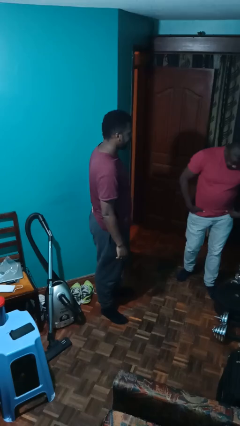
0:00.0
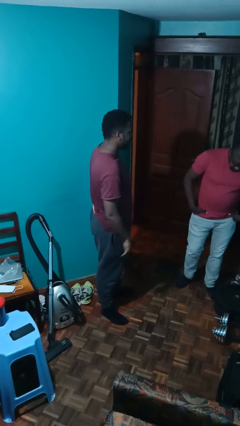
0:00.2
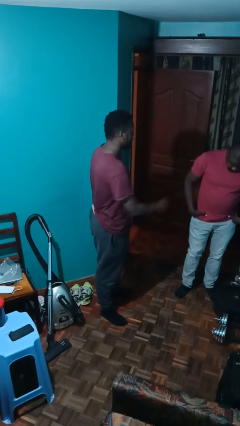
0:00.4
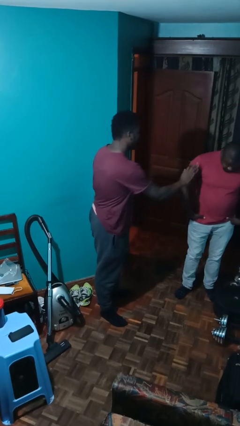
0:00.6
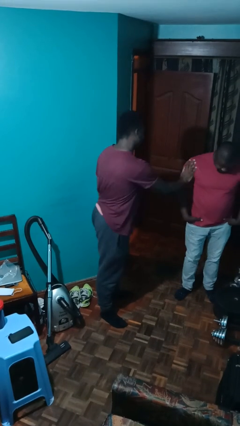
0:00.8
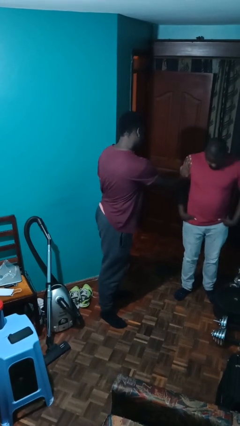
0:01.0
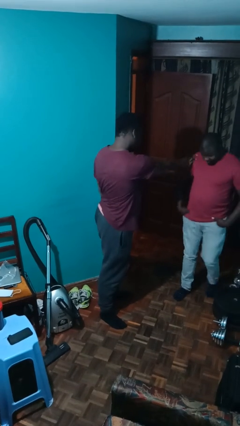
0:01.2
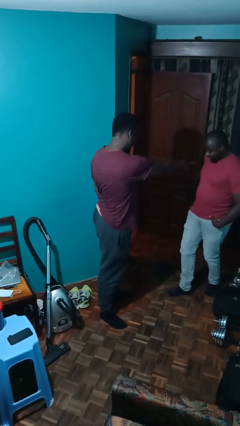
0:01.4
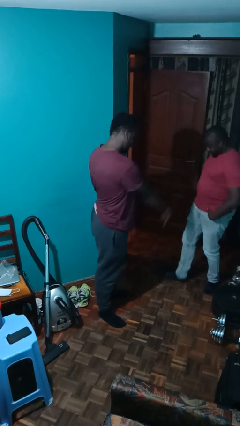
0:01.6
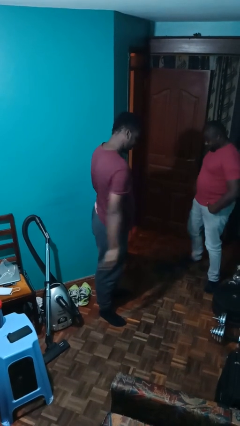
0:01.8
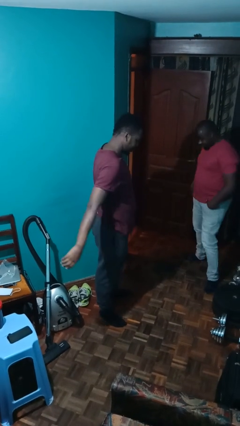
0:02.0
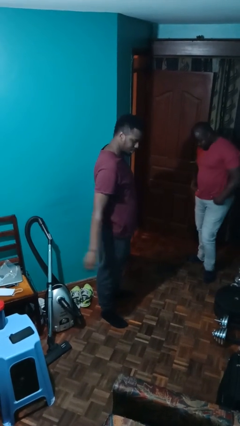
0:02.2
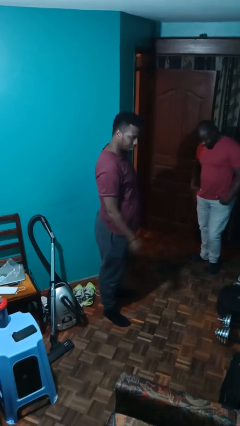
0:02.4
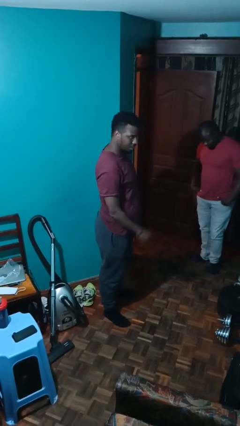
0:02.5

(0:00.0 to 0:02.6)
person shoves person

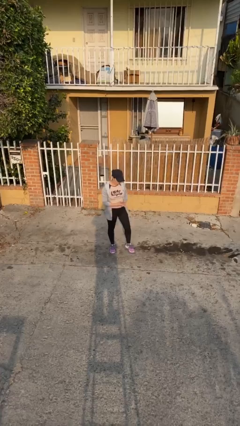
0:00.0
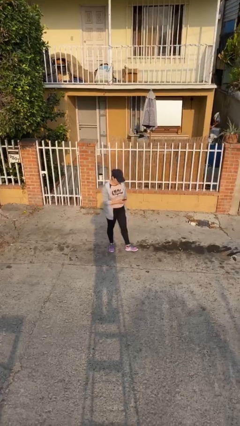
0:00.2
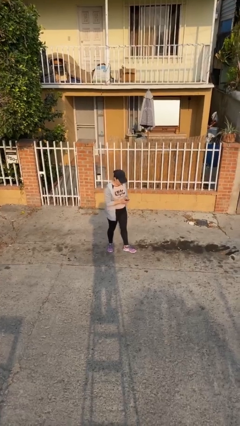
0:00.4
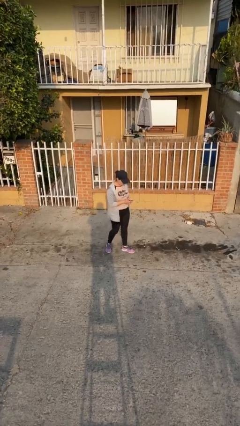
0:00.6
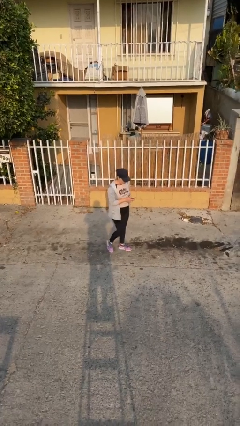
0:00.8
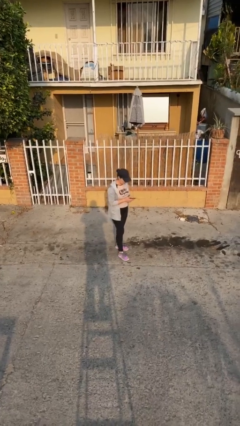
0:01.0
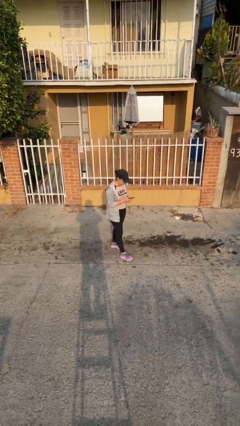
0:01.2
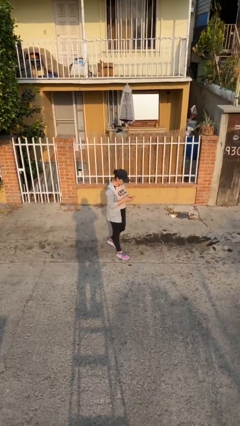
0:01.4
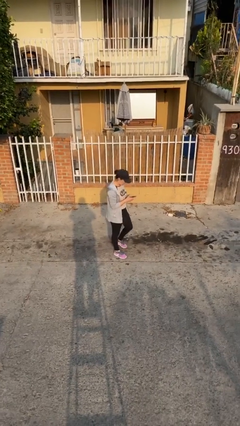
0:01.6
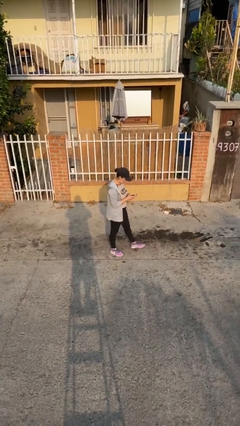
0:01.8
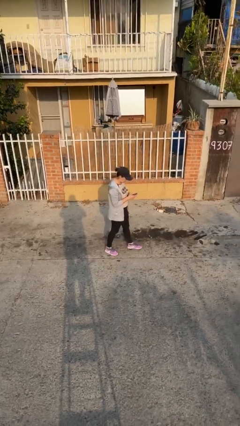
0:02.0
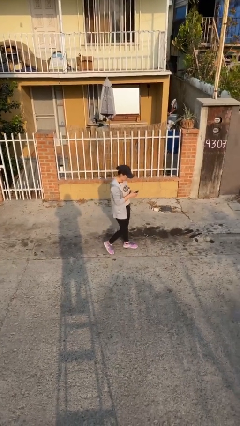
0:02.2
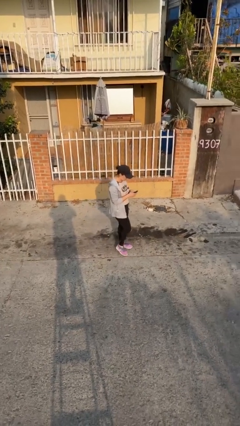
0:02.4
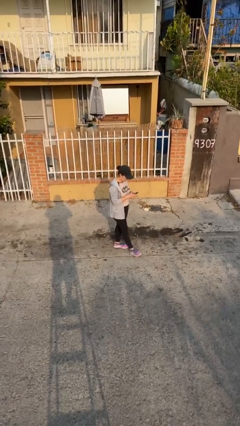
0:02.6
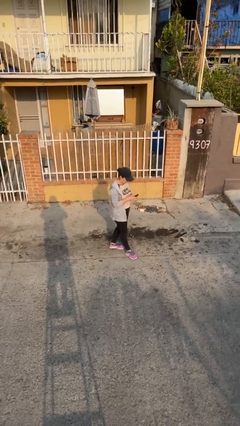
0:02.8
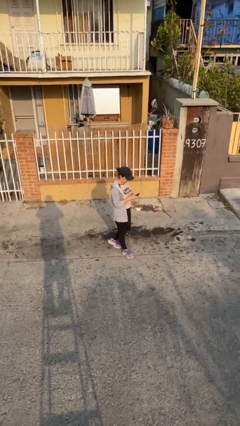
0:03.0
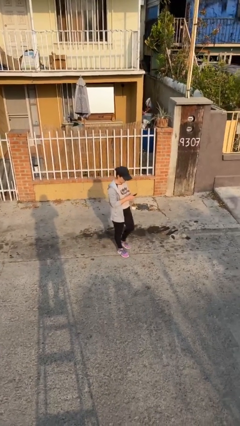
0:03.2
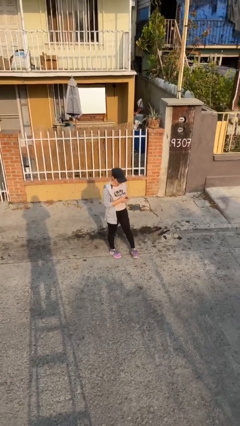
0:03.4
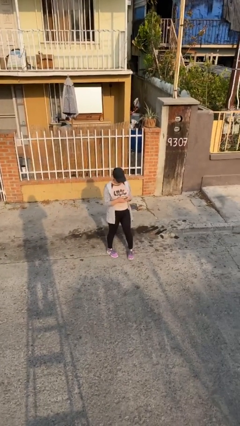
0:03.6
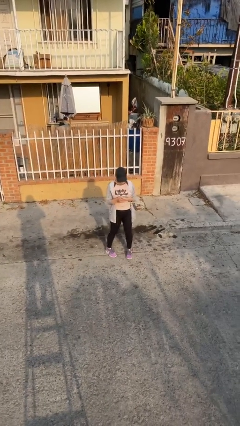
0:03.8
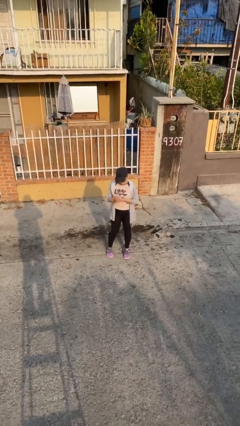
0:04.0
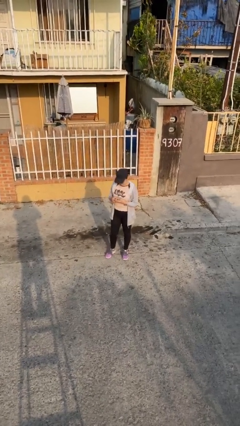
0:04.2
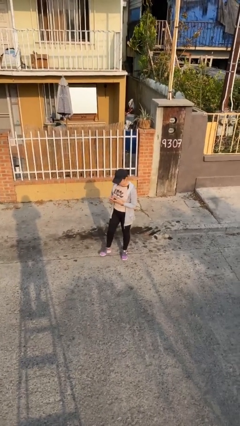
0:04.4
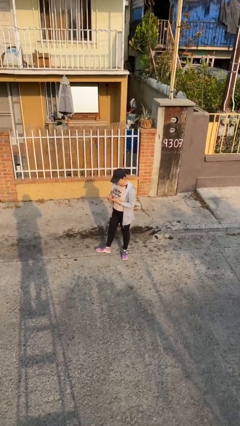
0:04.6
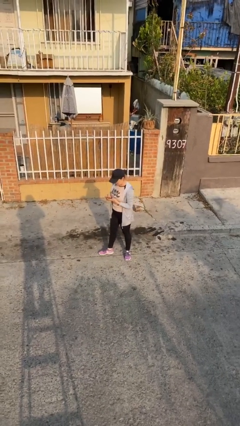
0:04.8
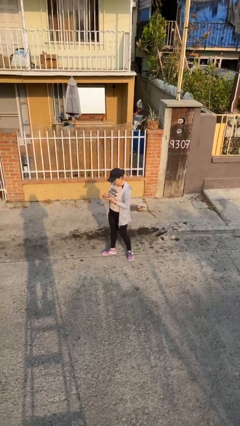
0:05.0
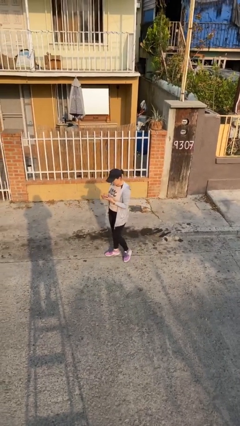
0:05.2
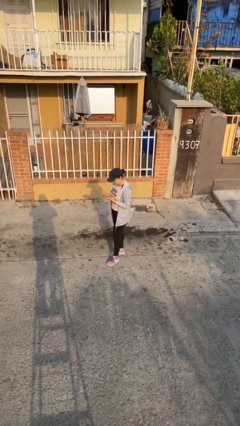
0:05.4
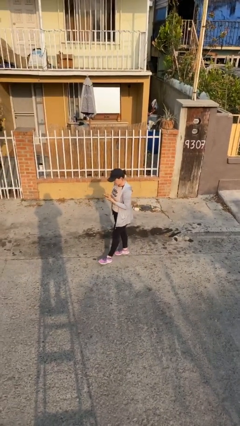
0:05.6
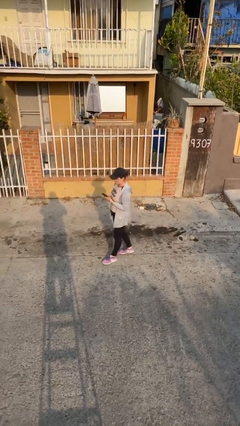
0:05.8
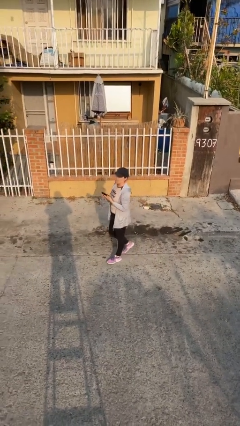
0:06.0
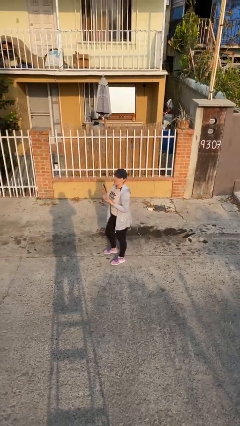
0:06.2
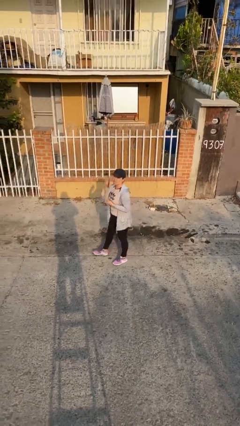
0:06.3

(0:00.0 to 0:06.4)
person texts on phone

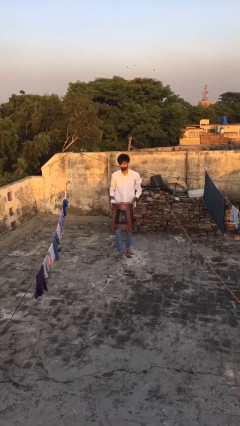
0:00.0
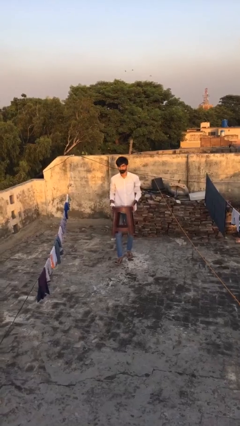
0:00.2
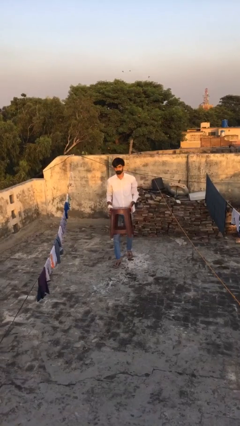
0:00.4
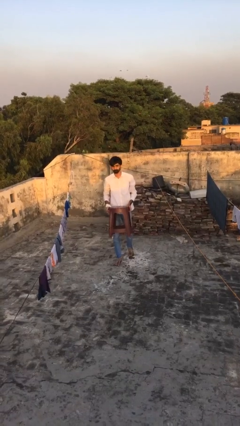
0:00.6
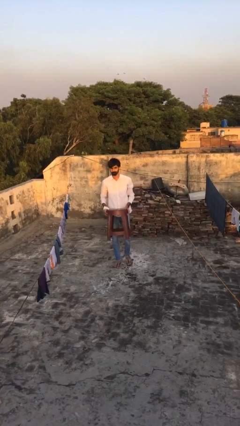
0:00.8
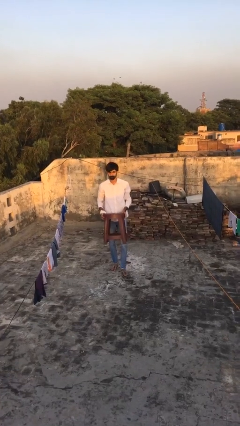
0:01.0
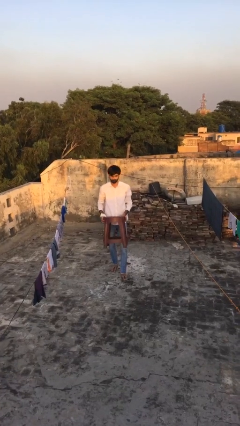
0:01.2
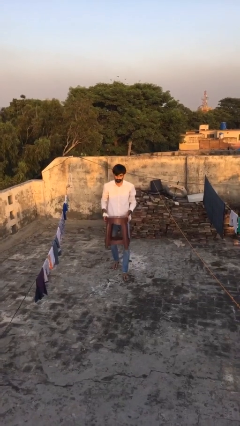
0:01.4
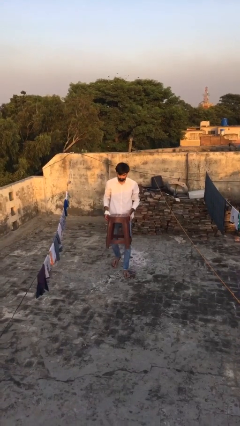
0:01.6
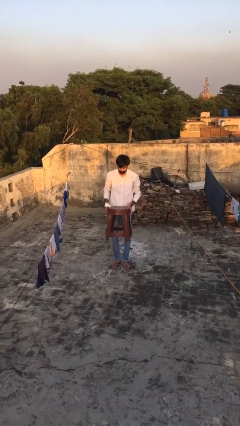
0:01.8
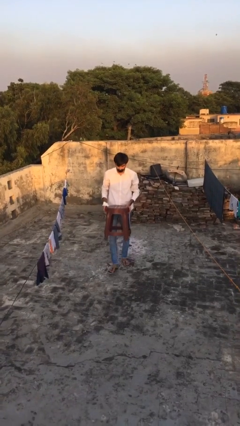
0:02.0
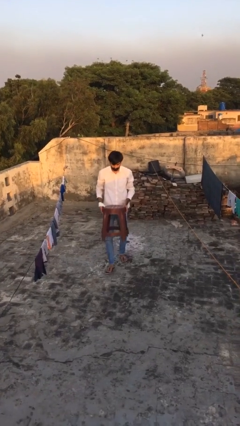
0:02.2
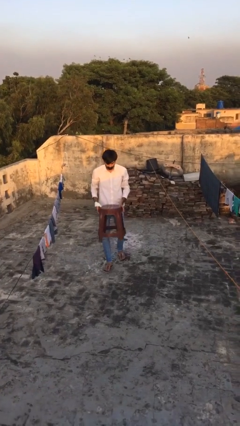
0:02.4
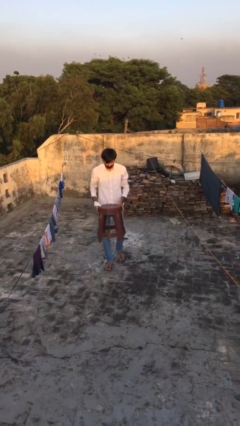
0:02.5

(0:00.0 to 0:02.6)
person carries heavy object

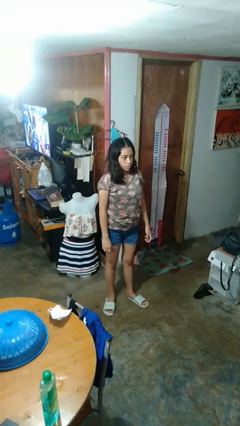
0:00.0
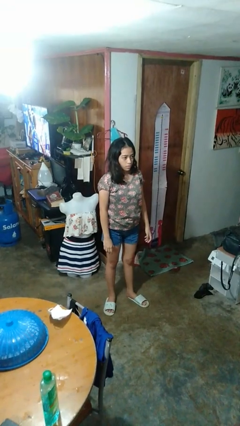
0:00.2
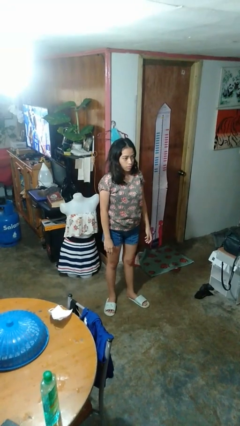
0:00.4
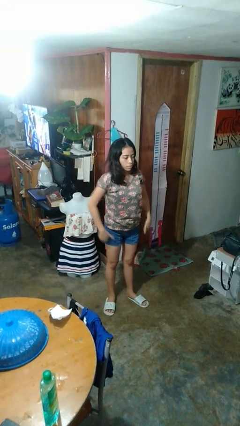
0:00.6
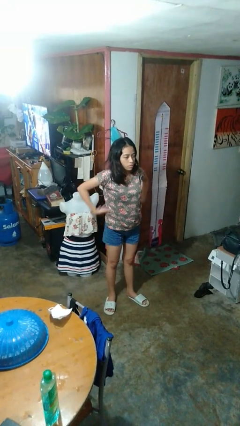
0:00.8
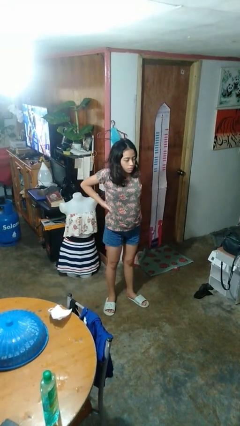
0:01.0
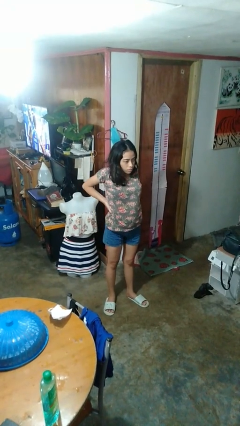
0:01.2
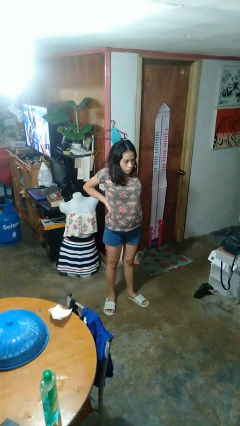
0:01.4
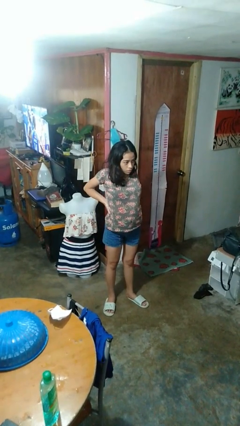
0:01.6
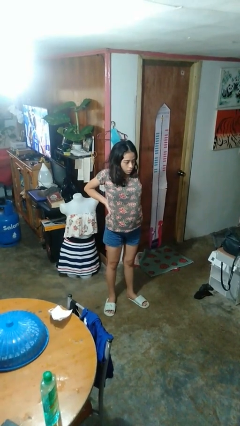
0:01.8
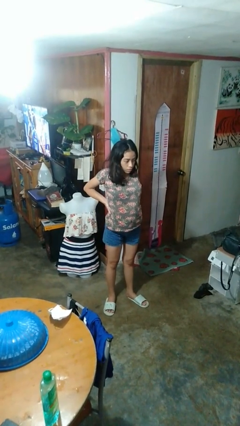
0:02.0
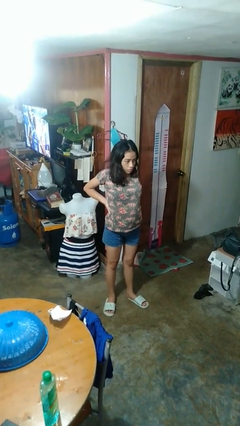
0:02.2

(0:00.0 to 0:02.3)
person stretches back

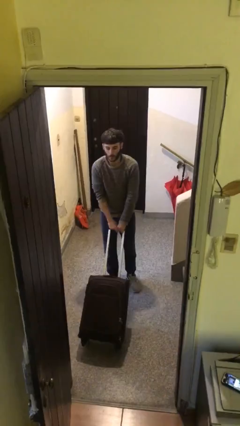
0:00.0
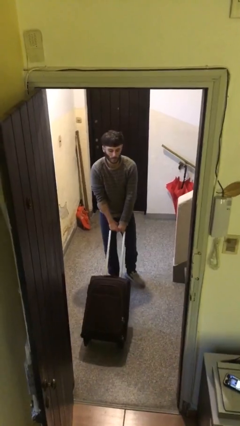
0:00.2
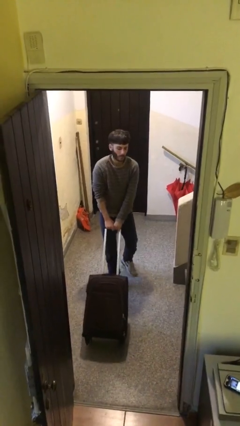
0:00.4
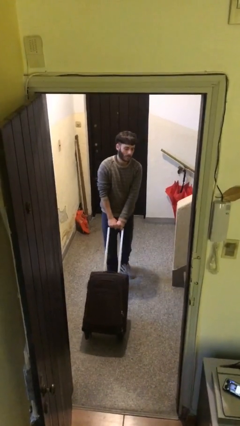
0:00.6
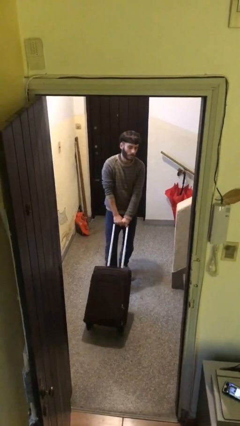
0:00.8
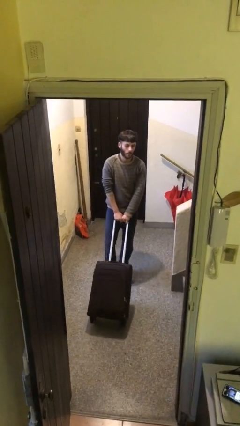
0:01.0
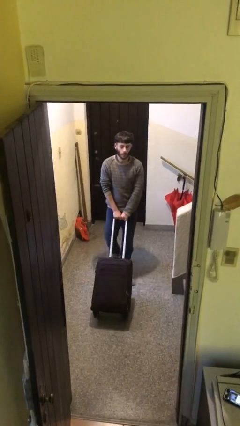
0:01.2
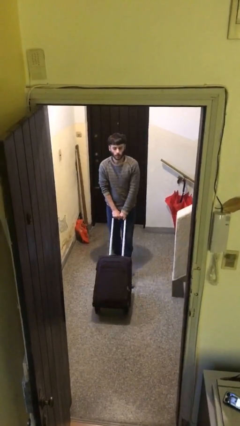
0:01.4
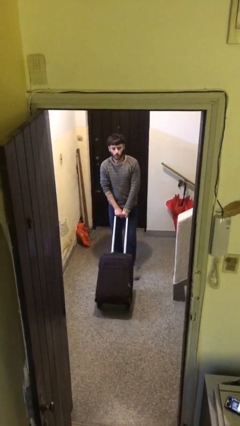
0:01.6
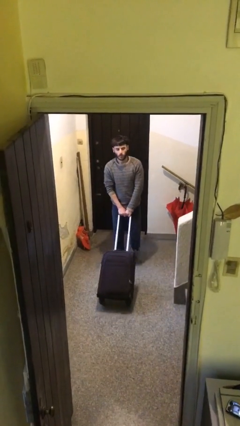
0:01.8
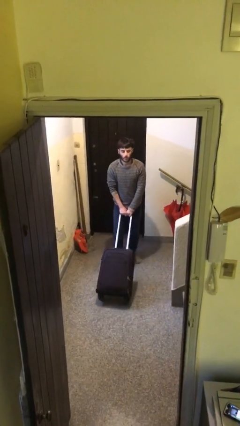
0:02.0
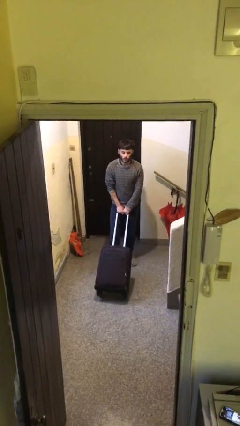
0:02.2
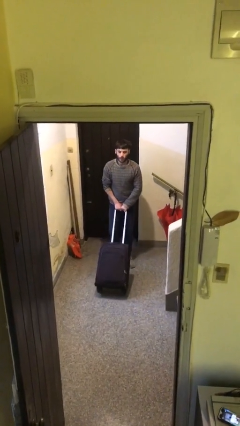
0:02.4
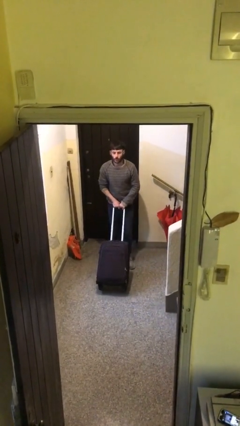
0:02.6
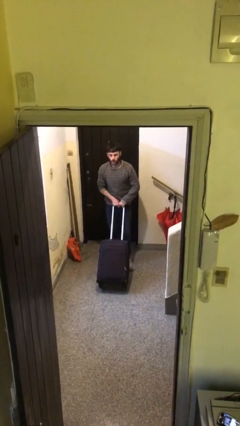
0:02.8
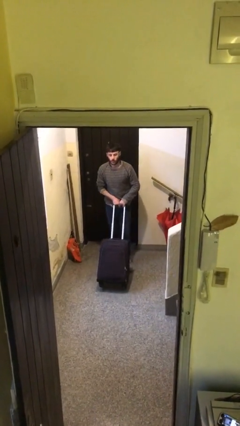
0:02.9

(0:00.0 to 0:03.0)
person pulls wheeled cart

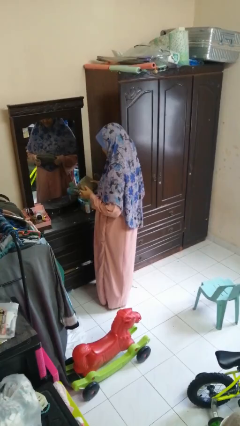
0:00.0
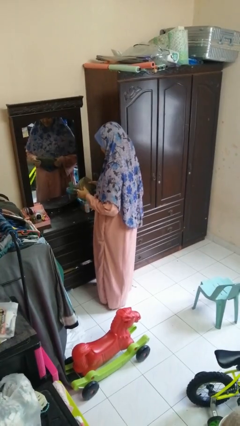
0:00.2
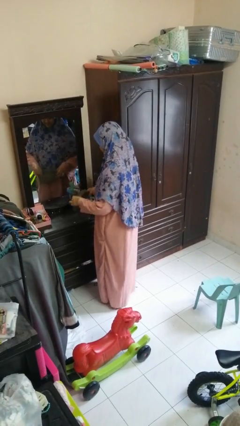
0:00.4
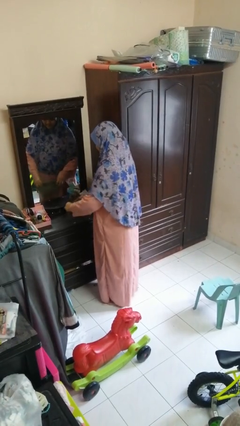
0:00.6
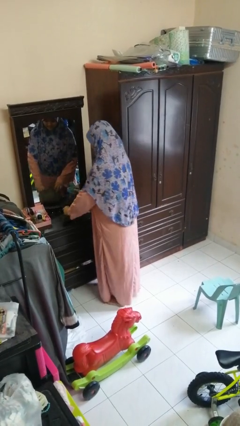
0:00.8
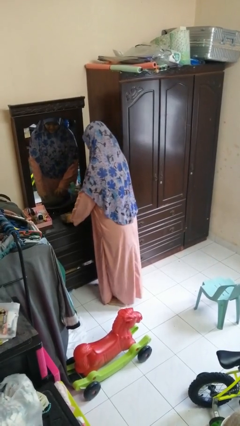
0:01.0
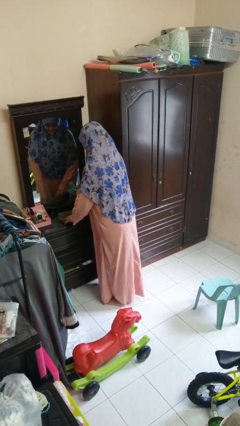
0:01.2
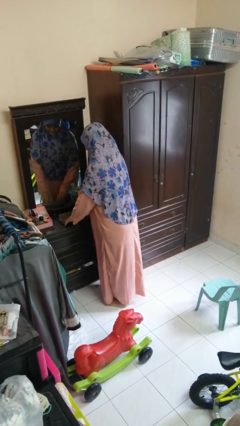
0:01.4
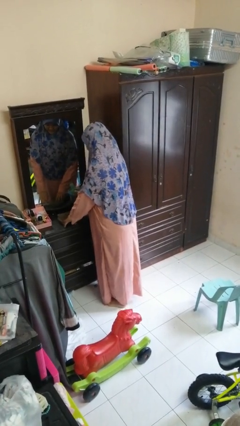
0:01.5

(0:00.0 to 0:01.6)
person puts down object on countertop
